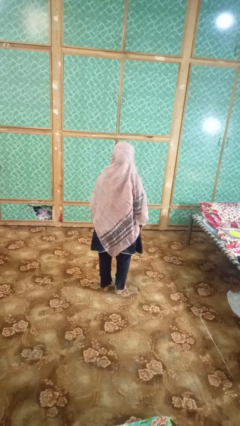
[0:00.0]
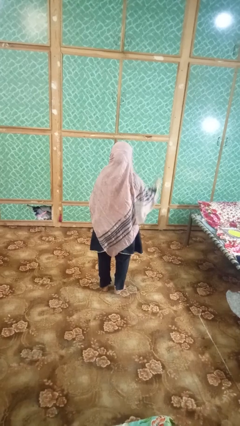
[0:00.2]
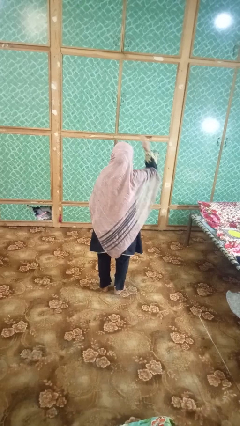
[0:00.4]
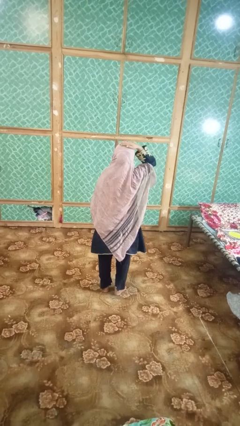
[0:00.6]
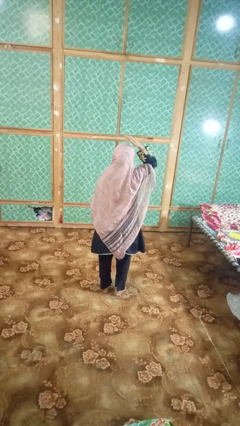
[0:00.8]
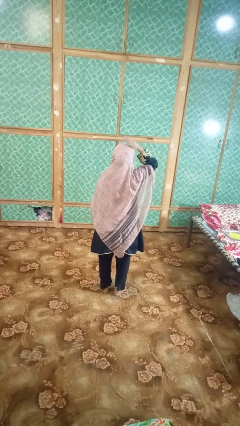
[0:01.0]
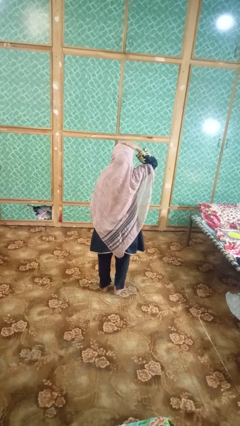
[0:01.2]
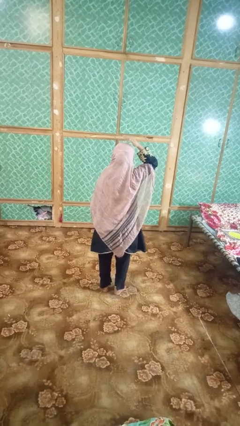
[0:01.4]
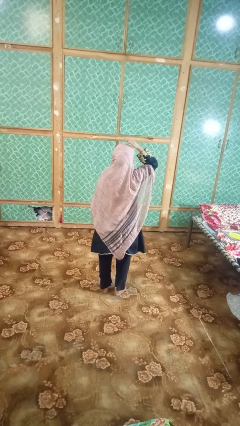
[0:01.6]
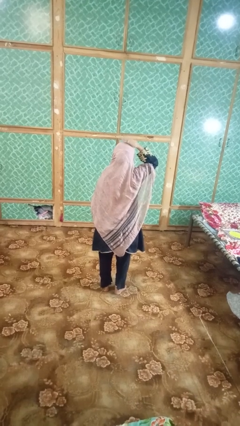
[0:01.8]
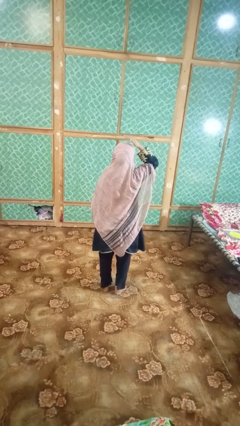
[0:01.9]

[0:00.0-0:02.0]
person pats head

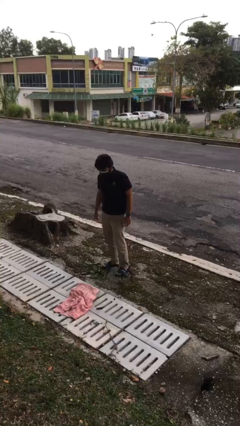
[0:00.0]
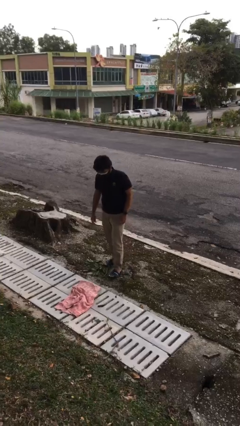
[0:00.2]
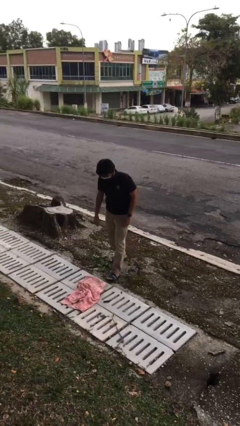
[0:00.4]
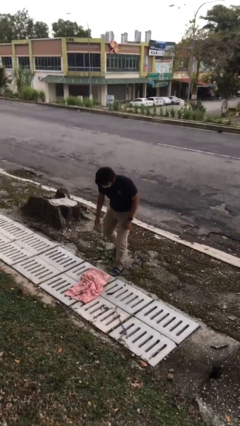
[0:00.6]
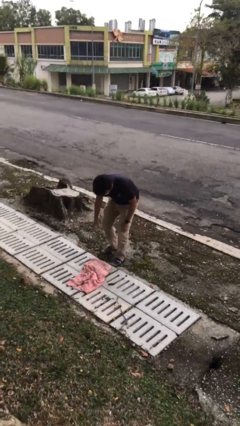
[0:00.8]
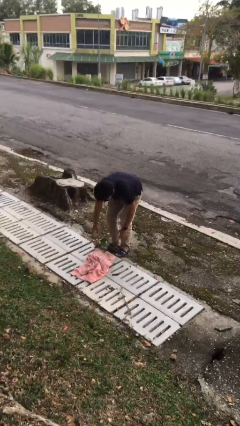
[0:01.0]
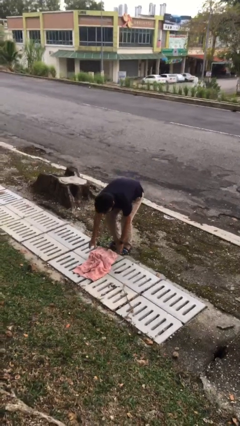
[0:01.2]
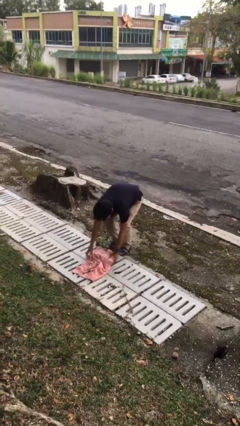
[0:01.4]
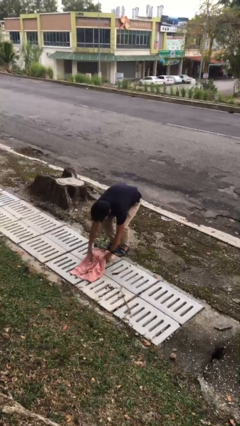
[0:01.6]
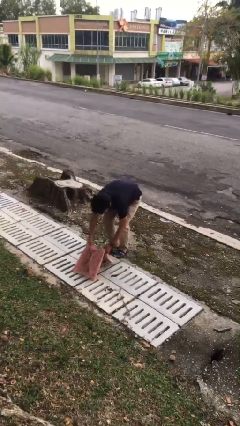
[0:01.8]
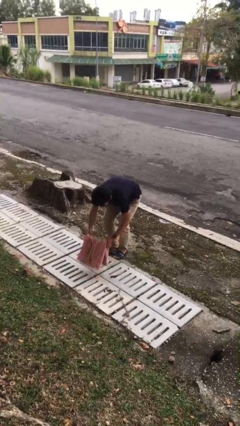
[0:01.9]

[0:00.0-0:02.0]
person picks up object from floor

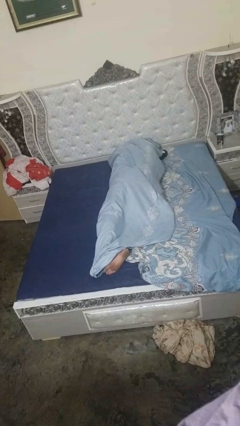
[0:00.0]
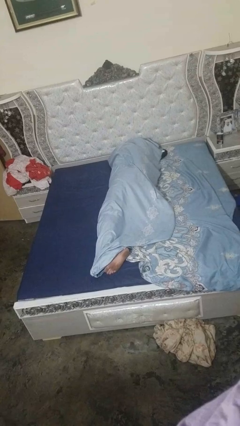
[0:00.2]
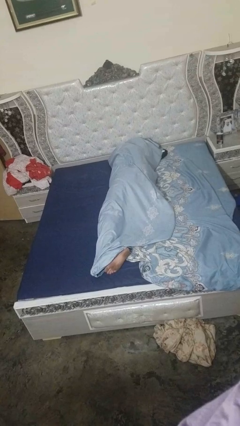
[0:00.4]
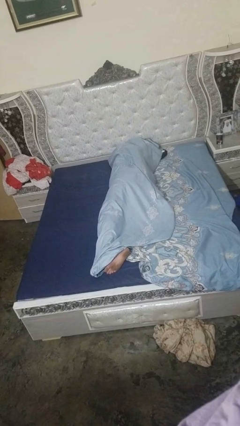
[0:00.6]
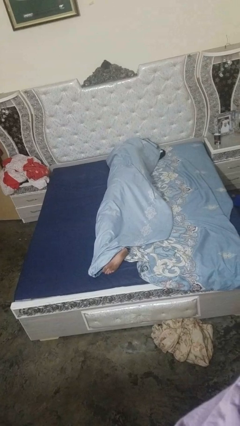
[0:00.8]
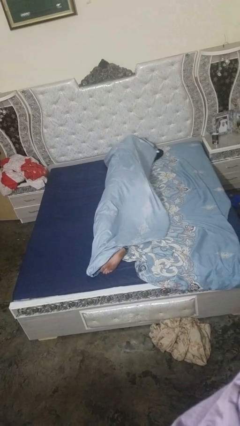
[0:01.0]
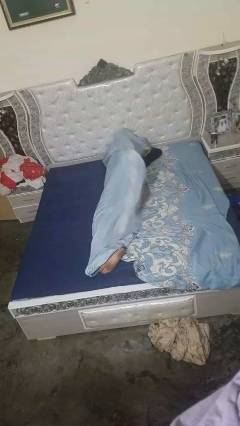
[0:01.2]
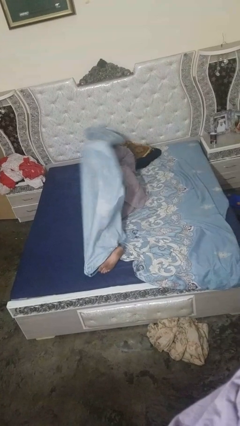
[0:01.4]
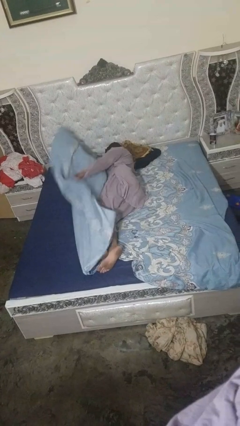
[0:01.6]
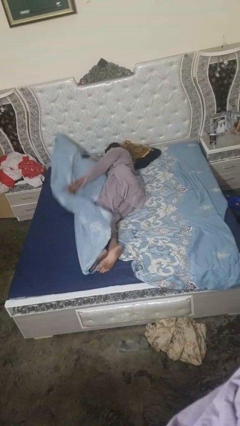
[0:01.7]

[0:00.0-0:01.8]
person uncovers with bedsheets

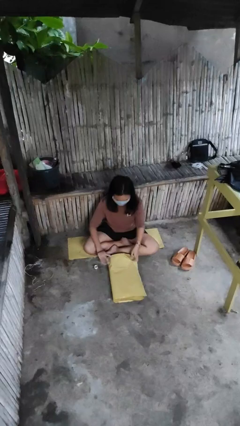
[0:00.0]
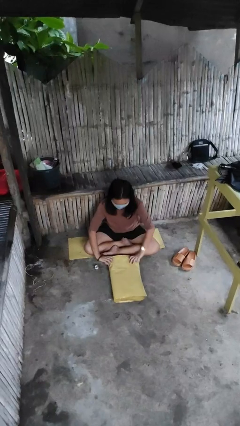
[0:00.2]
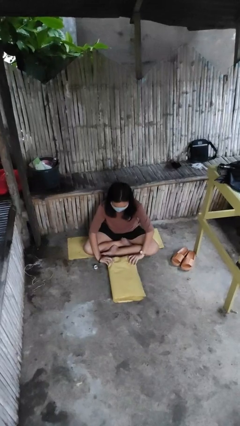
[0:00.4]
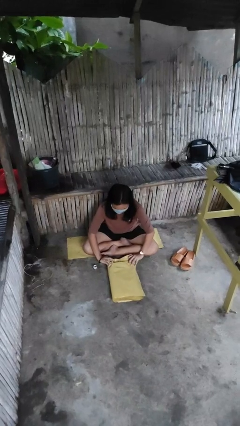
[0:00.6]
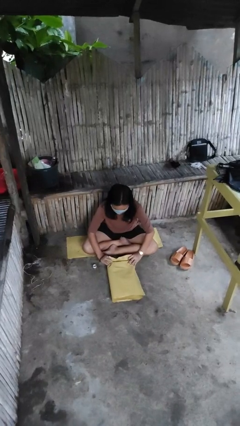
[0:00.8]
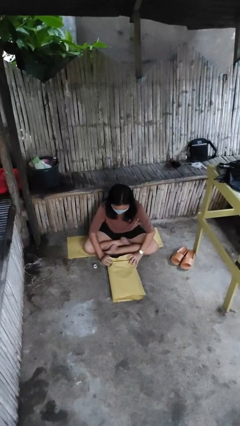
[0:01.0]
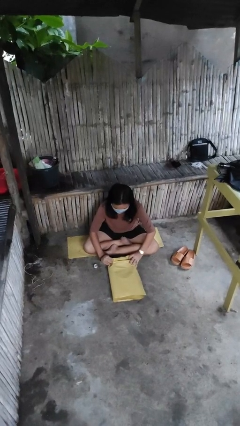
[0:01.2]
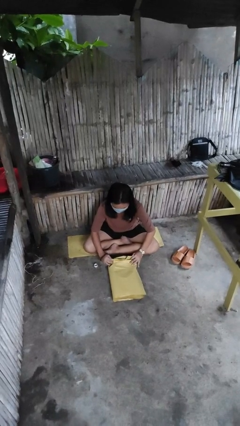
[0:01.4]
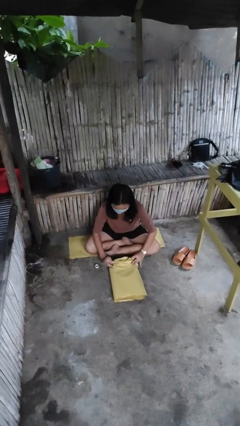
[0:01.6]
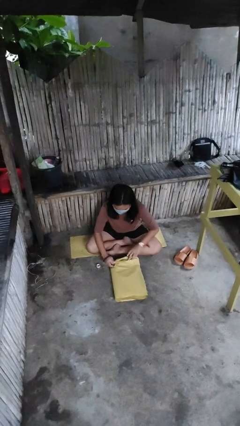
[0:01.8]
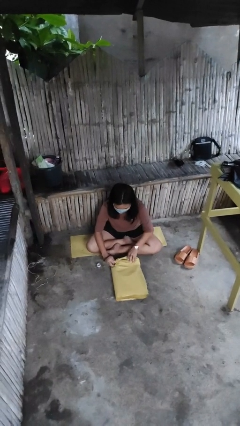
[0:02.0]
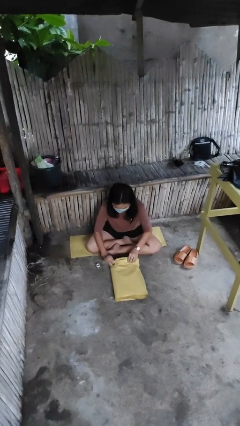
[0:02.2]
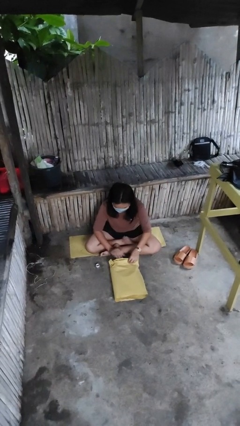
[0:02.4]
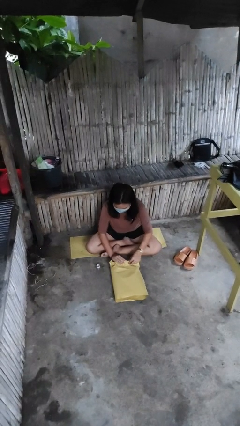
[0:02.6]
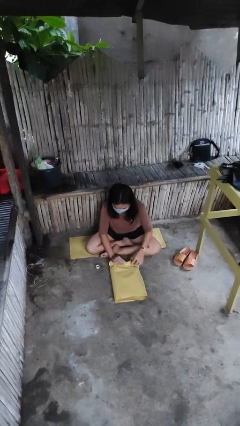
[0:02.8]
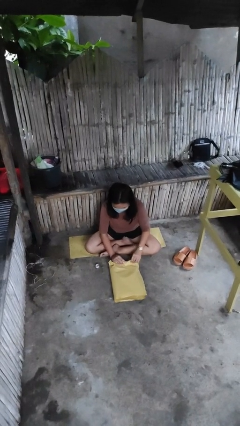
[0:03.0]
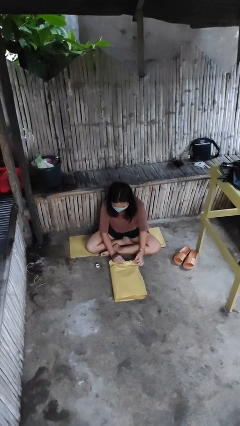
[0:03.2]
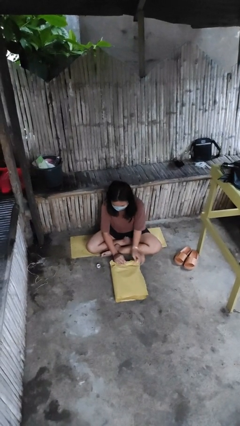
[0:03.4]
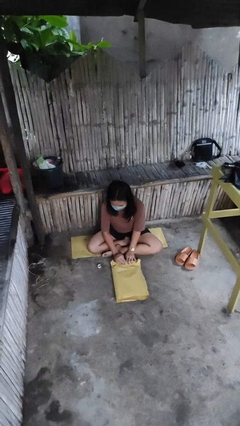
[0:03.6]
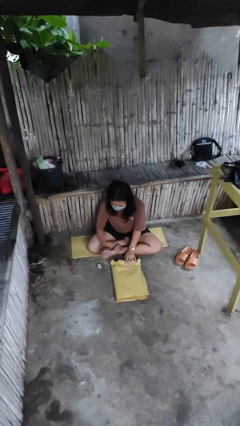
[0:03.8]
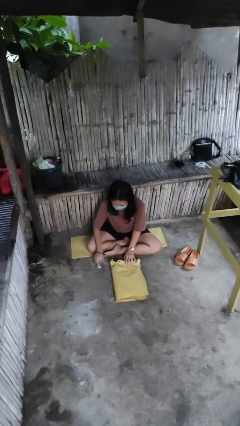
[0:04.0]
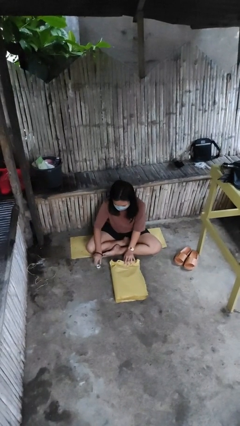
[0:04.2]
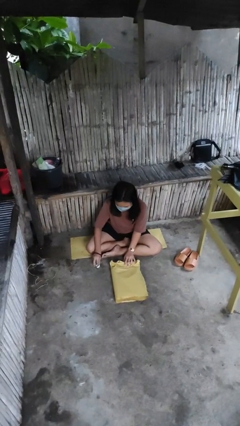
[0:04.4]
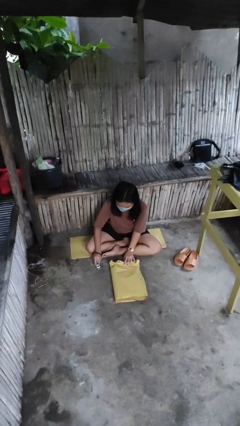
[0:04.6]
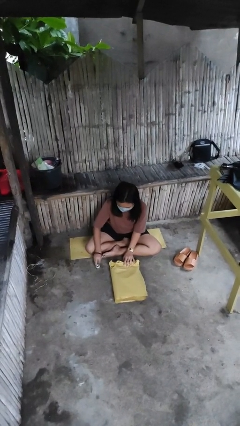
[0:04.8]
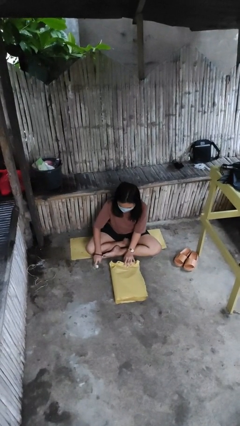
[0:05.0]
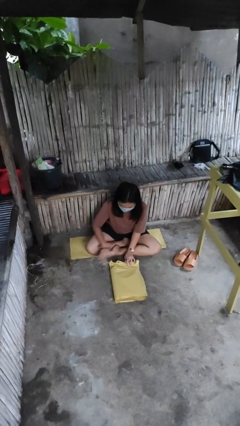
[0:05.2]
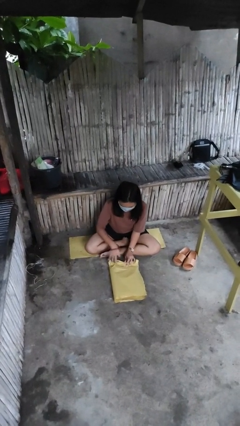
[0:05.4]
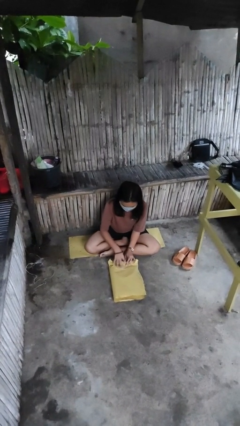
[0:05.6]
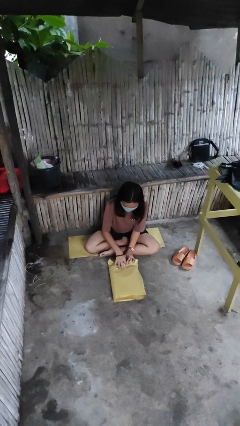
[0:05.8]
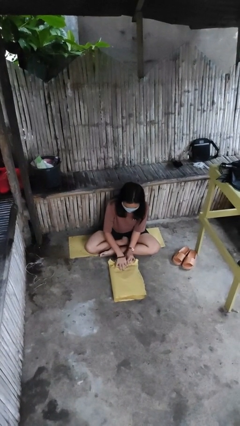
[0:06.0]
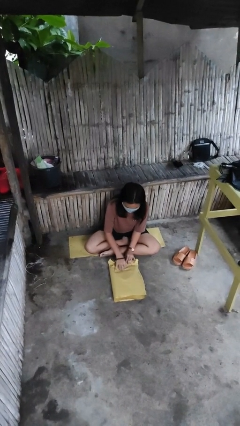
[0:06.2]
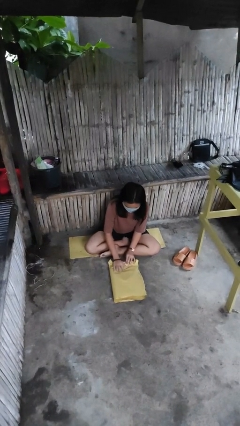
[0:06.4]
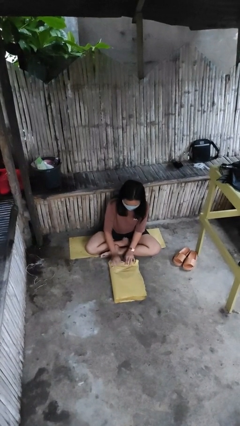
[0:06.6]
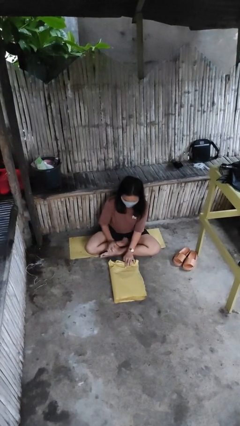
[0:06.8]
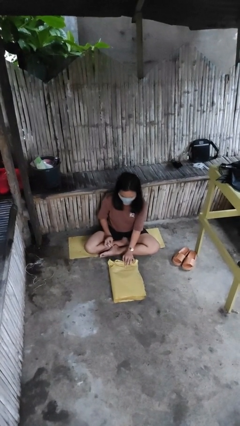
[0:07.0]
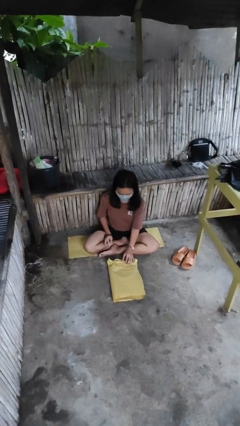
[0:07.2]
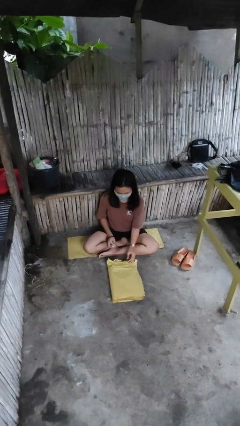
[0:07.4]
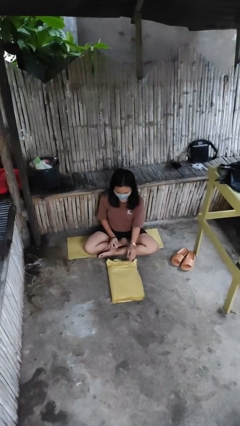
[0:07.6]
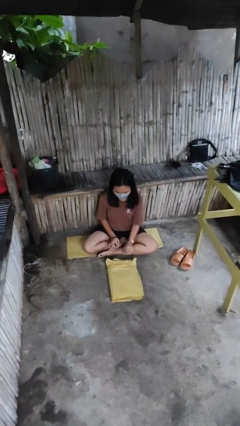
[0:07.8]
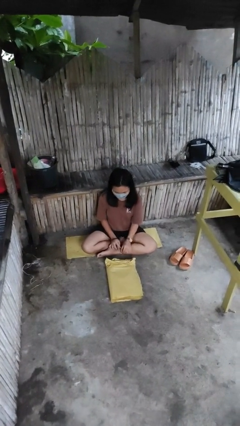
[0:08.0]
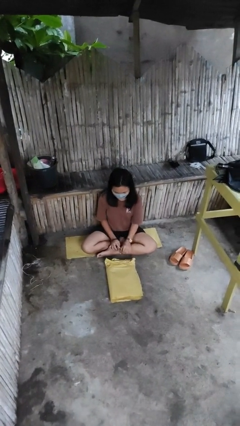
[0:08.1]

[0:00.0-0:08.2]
person wraps box

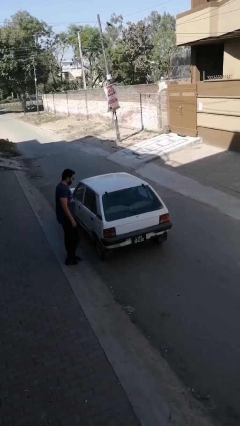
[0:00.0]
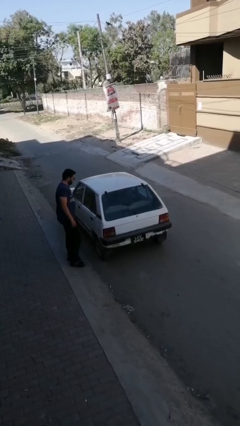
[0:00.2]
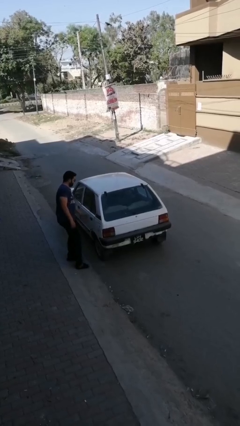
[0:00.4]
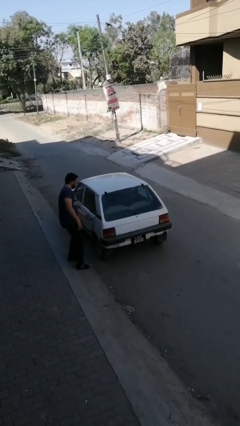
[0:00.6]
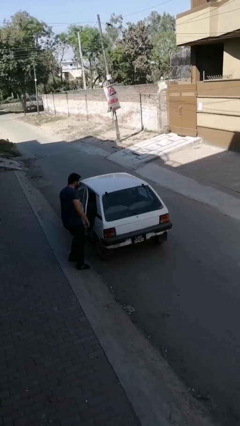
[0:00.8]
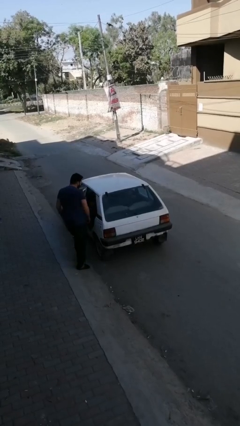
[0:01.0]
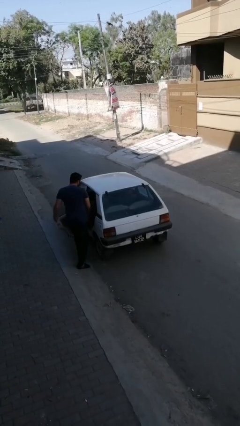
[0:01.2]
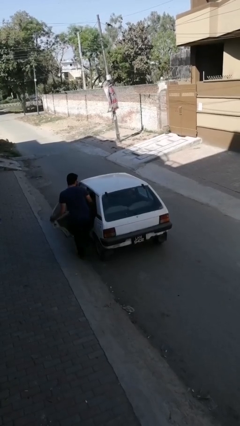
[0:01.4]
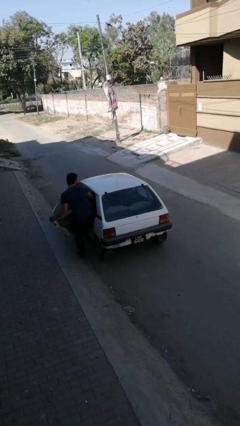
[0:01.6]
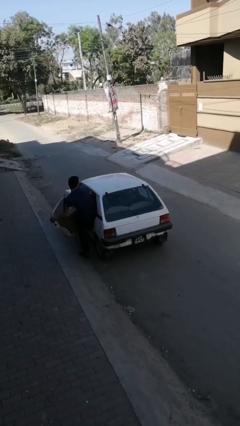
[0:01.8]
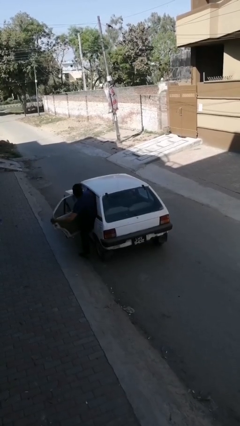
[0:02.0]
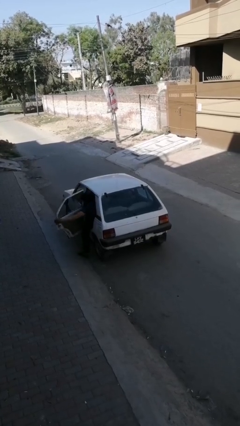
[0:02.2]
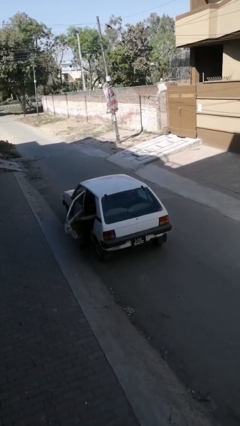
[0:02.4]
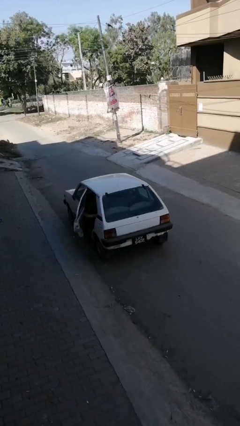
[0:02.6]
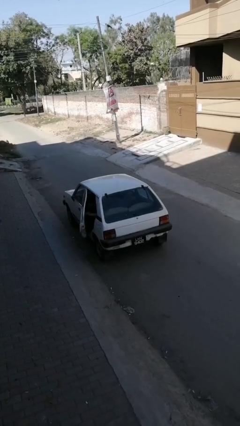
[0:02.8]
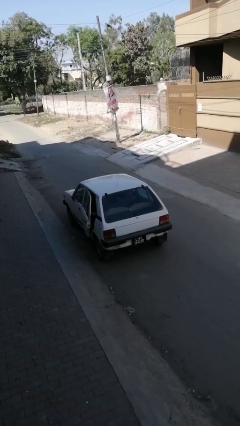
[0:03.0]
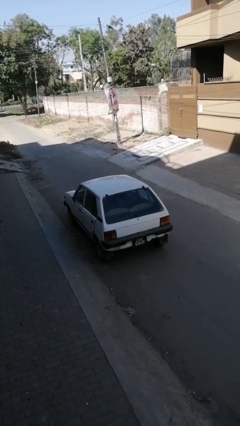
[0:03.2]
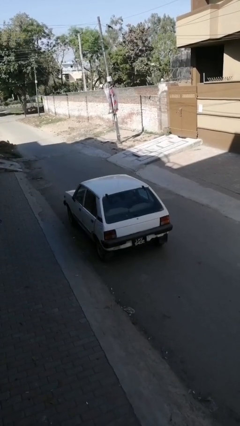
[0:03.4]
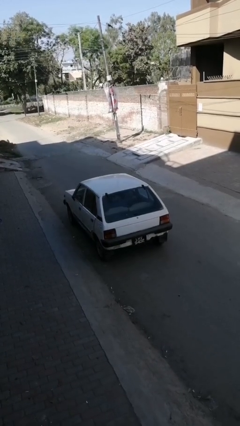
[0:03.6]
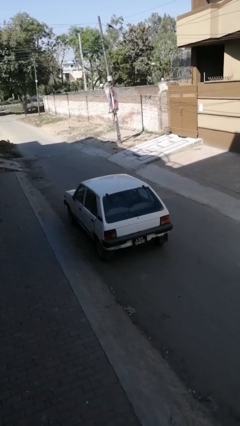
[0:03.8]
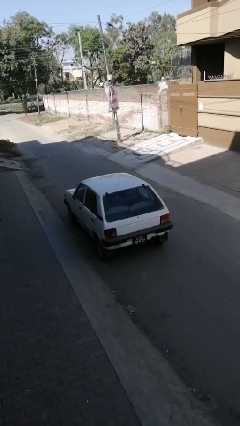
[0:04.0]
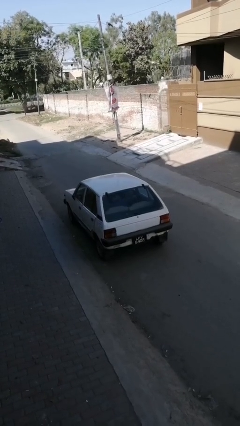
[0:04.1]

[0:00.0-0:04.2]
car picks up person
